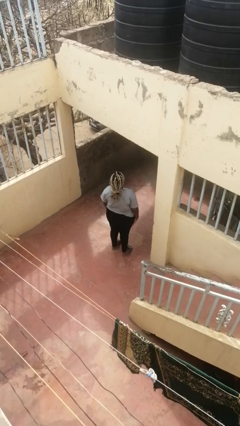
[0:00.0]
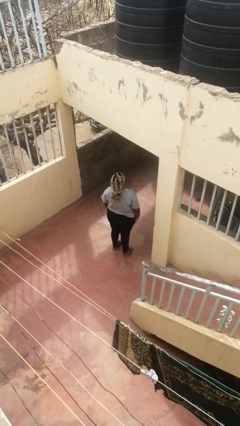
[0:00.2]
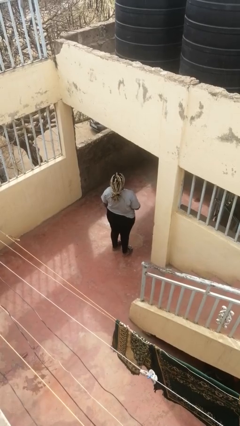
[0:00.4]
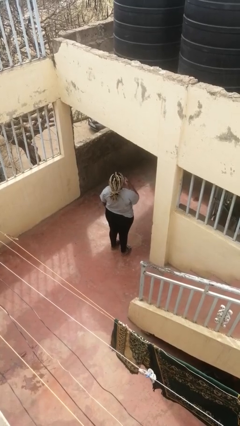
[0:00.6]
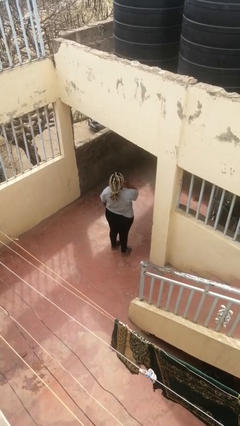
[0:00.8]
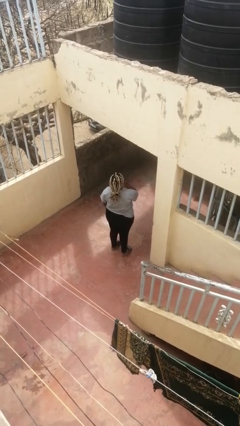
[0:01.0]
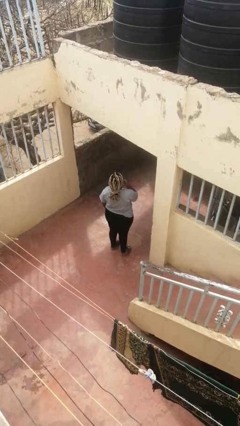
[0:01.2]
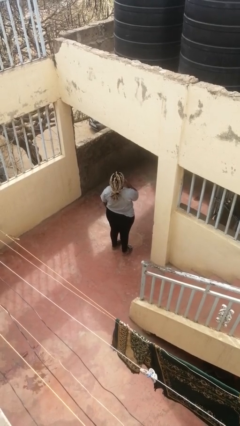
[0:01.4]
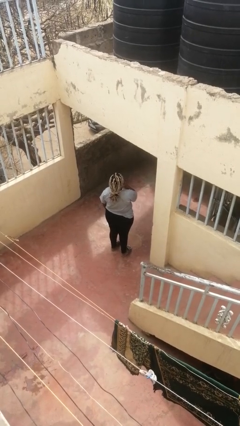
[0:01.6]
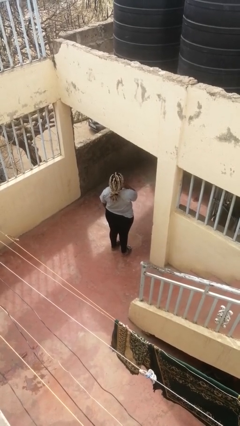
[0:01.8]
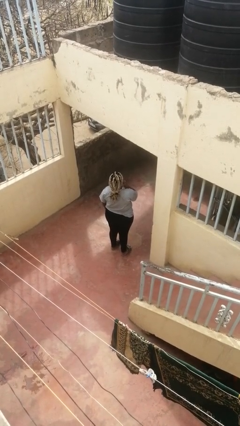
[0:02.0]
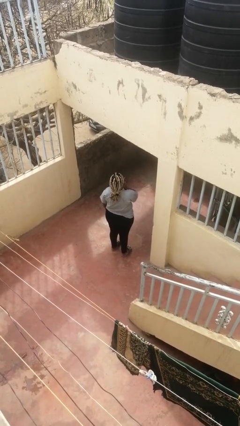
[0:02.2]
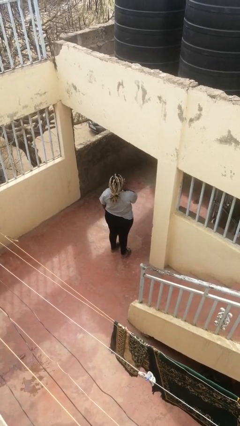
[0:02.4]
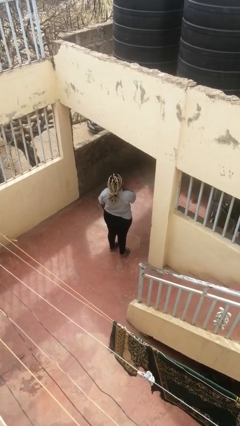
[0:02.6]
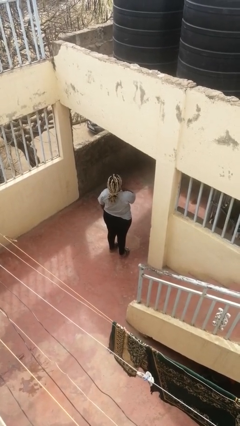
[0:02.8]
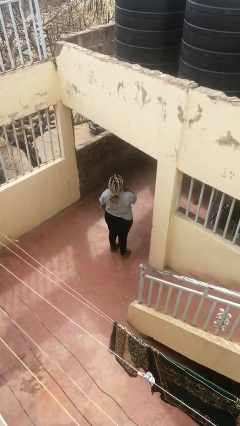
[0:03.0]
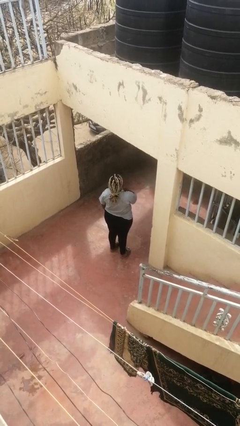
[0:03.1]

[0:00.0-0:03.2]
person strokes chin

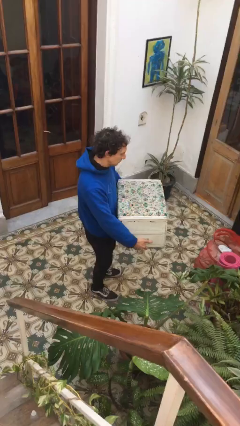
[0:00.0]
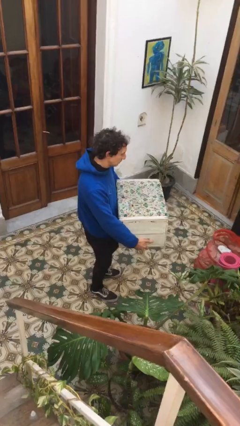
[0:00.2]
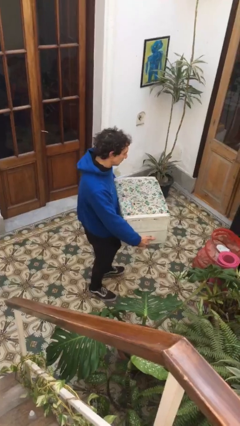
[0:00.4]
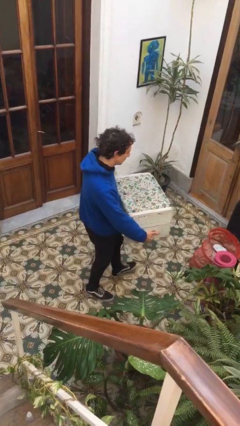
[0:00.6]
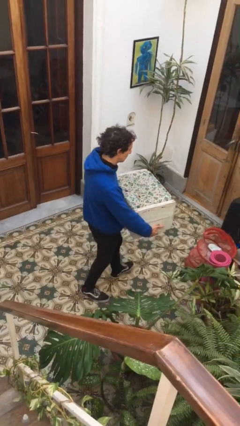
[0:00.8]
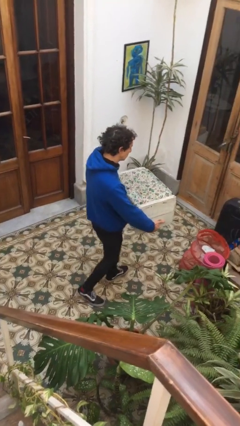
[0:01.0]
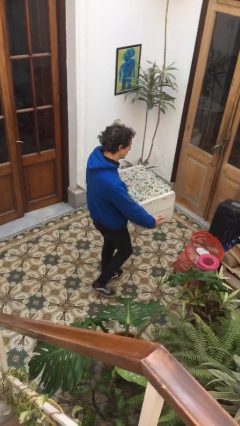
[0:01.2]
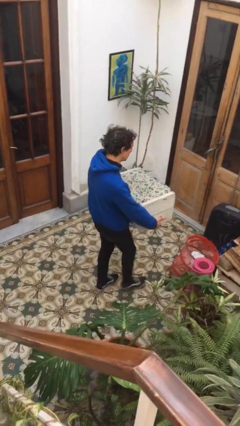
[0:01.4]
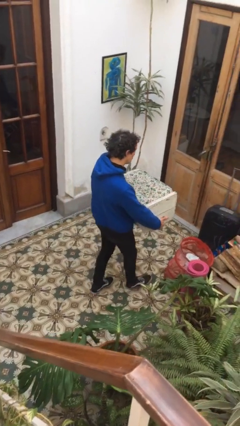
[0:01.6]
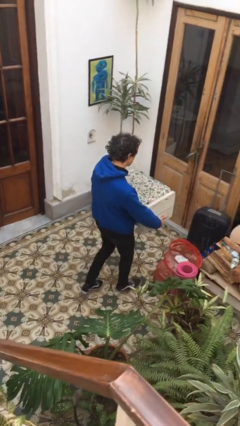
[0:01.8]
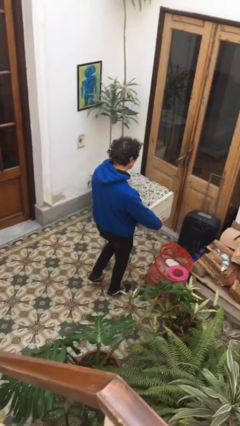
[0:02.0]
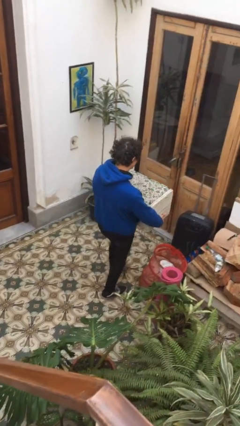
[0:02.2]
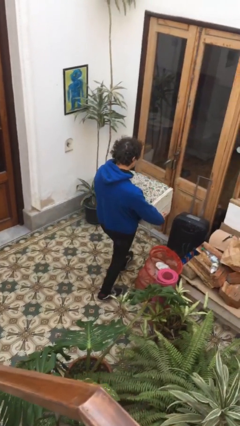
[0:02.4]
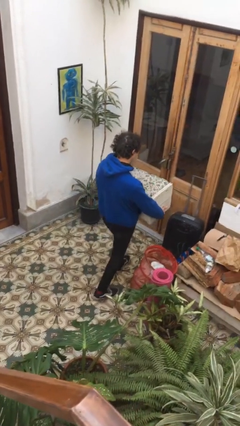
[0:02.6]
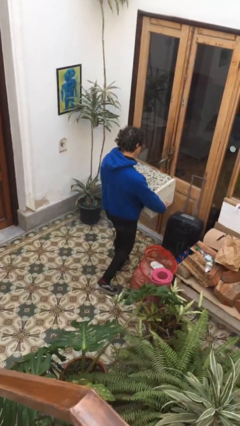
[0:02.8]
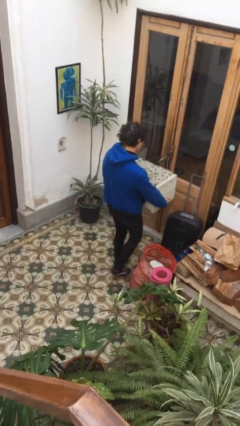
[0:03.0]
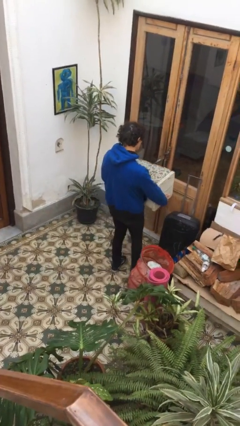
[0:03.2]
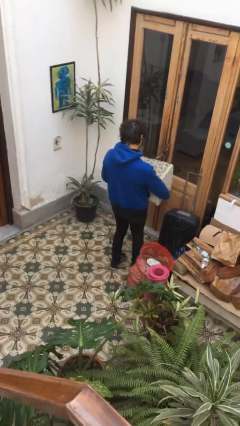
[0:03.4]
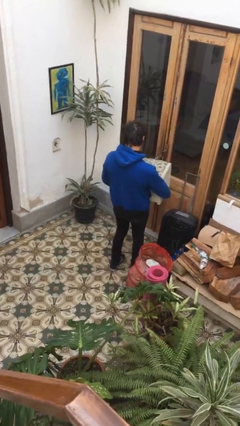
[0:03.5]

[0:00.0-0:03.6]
person carries furniture

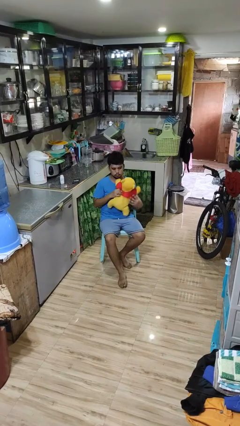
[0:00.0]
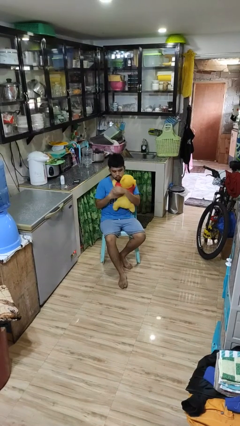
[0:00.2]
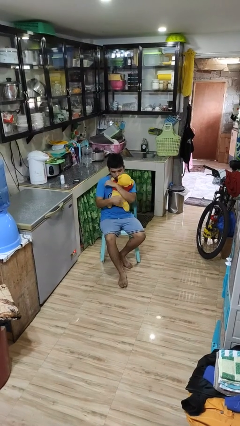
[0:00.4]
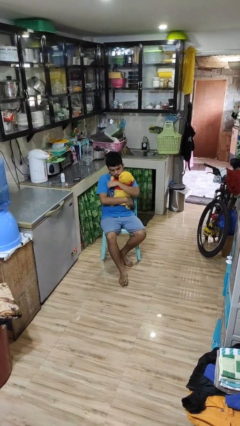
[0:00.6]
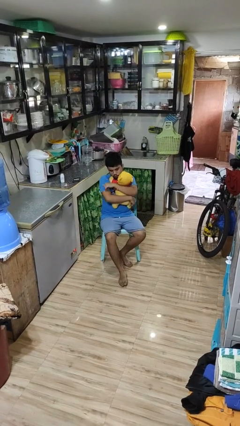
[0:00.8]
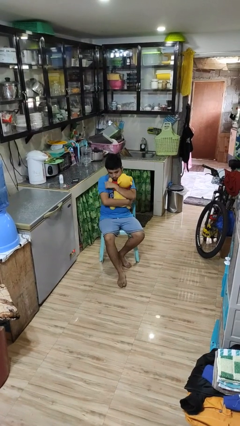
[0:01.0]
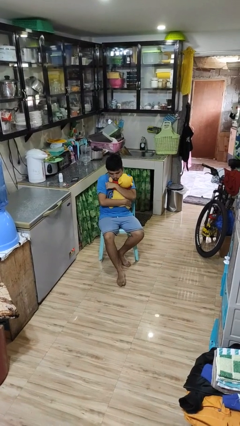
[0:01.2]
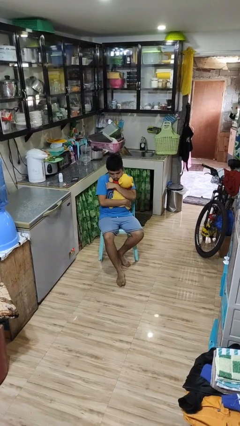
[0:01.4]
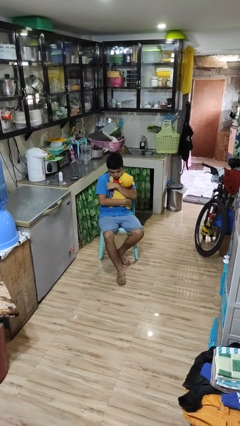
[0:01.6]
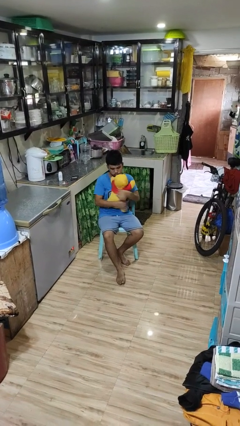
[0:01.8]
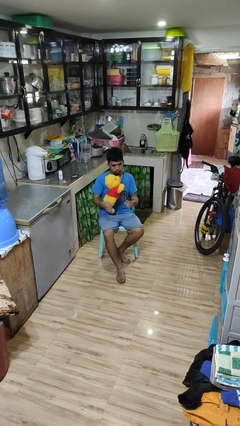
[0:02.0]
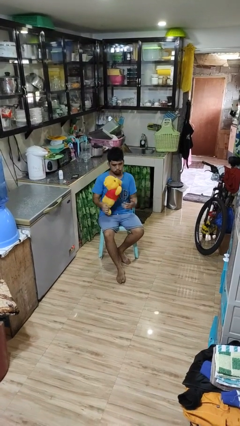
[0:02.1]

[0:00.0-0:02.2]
person hugs stuffed animal

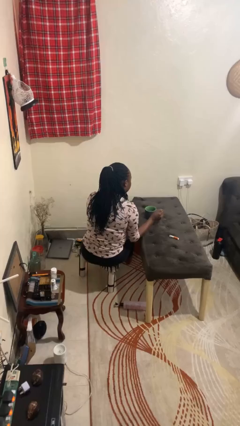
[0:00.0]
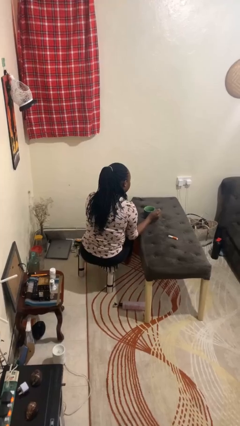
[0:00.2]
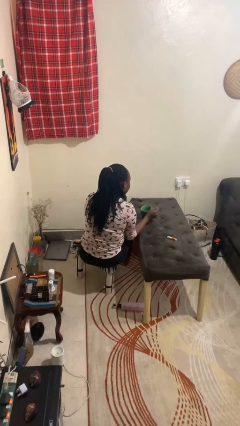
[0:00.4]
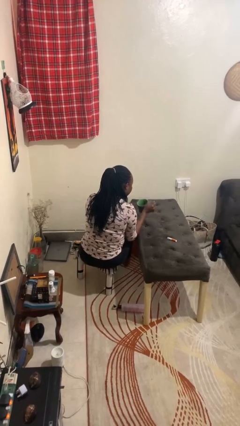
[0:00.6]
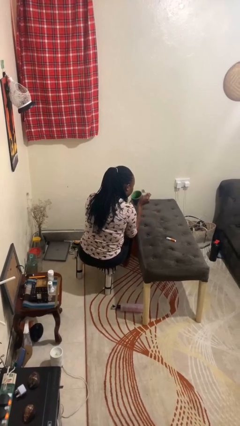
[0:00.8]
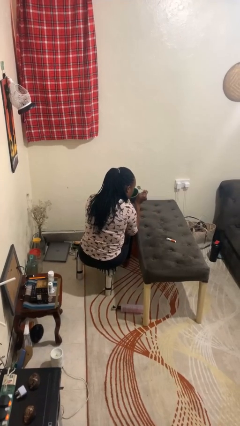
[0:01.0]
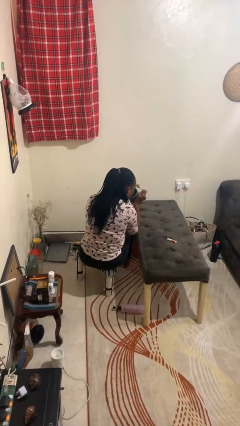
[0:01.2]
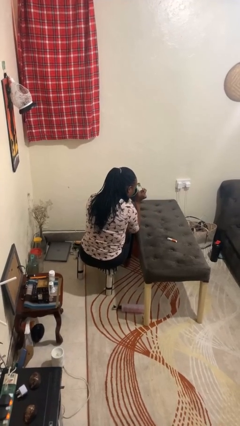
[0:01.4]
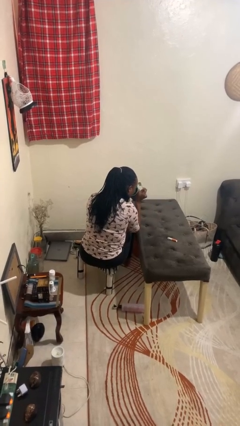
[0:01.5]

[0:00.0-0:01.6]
person drinks from mug

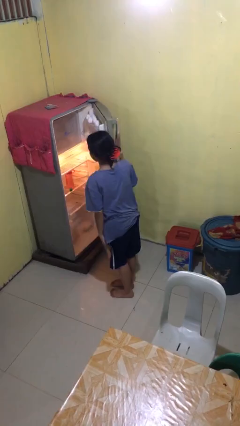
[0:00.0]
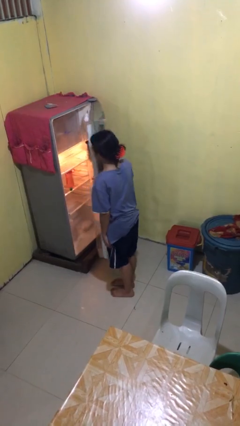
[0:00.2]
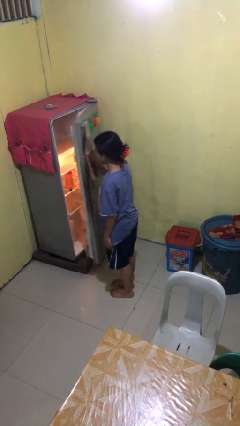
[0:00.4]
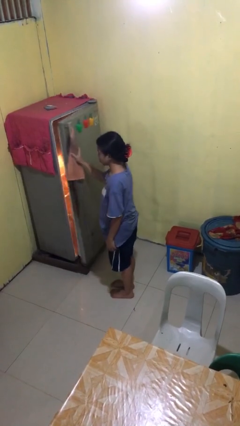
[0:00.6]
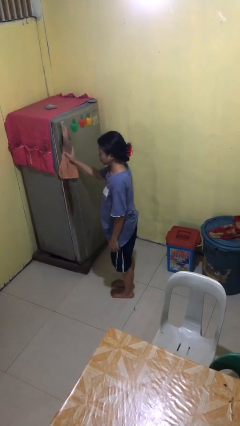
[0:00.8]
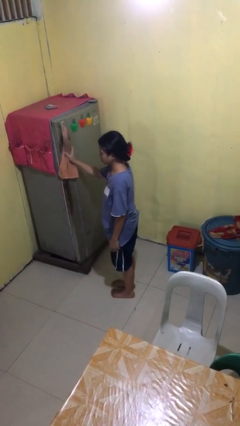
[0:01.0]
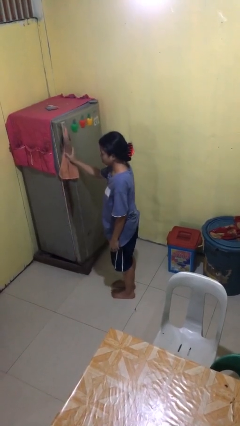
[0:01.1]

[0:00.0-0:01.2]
person closes refrigerator

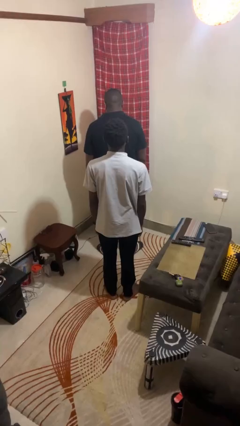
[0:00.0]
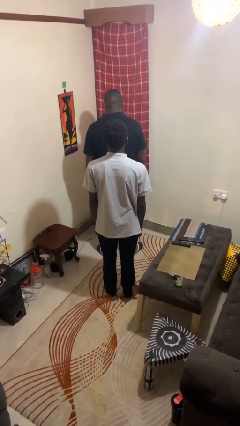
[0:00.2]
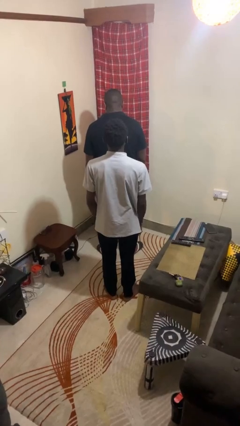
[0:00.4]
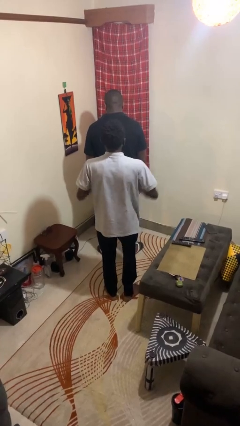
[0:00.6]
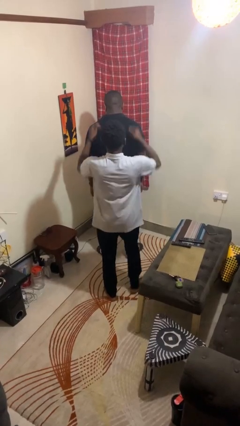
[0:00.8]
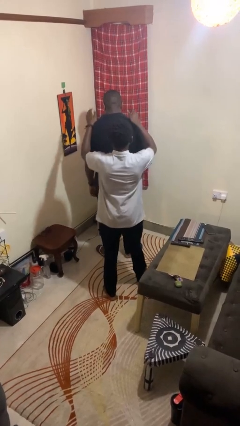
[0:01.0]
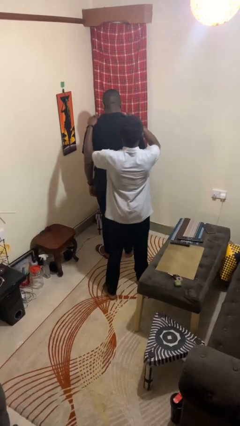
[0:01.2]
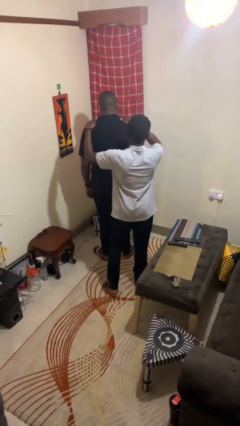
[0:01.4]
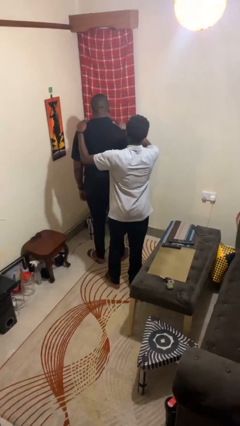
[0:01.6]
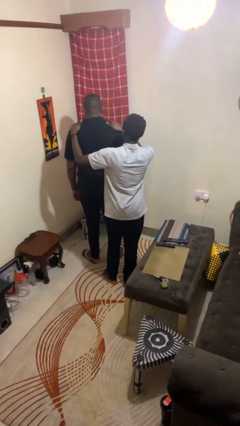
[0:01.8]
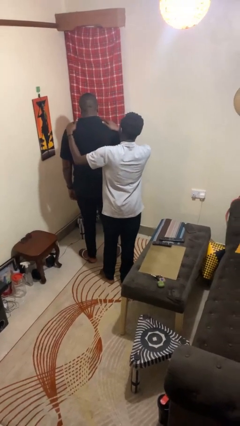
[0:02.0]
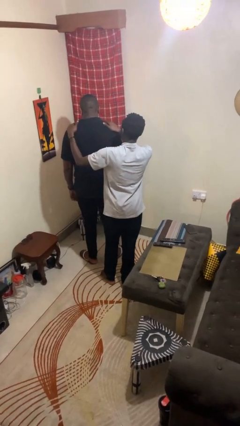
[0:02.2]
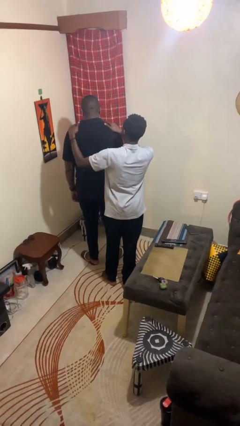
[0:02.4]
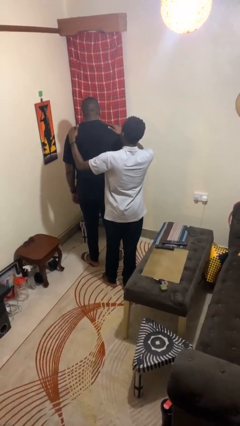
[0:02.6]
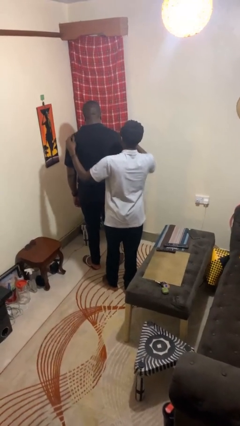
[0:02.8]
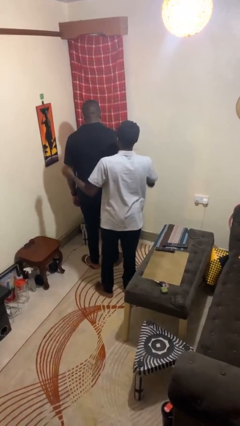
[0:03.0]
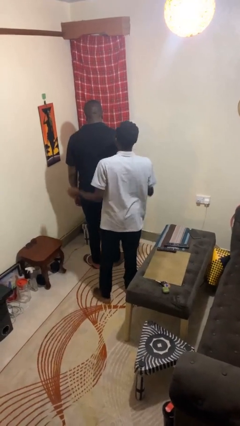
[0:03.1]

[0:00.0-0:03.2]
person pounds shoulders of person

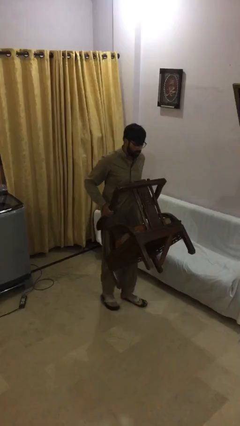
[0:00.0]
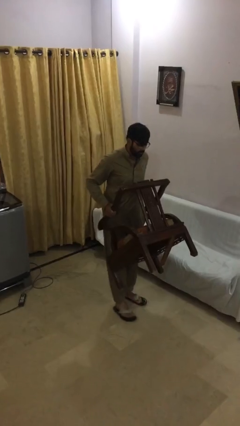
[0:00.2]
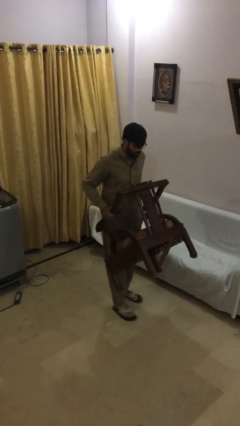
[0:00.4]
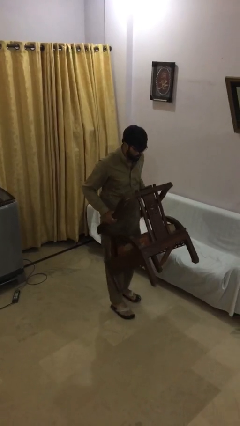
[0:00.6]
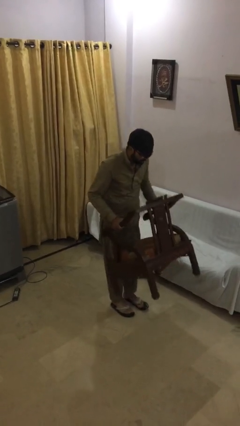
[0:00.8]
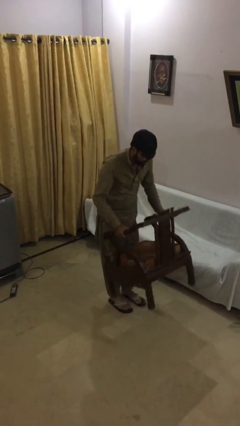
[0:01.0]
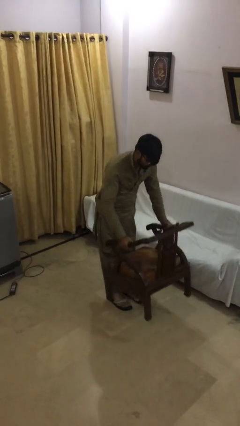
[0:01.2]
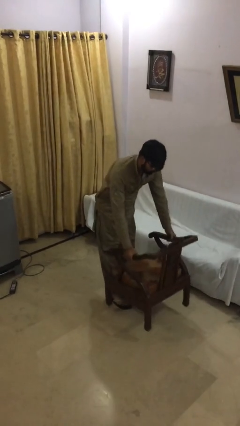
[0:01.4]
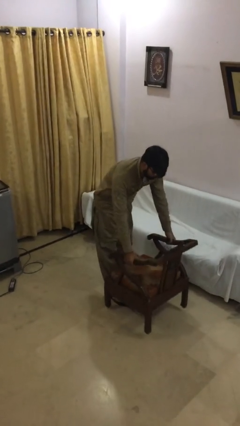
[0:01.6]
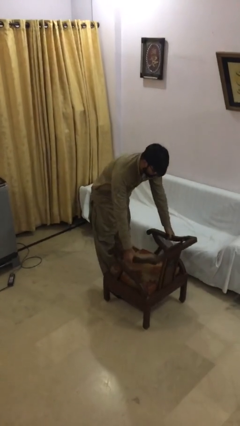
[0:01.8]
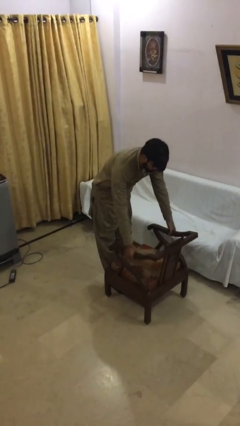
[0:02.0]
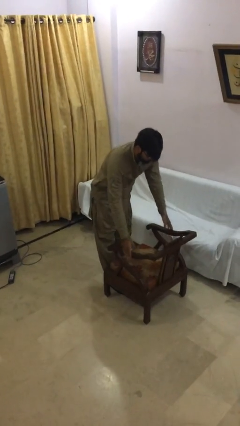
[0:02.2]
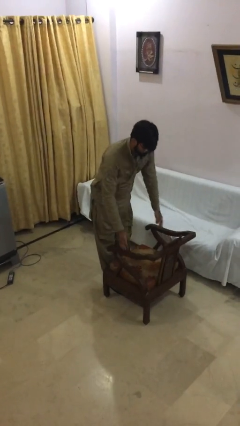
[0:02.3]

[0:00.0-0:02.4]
person puts down object on floor
